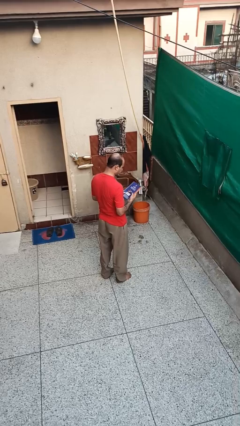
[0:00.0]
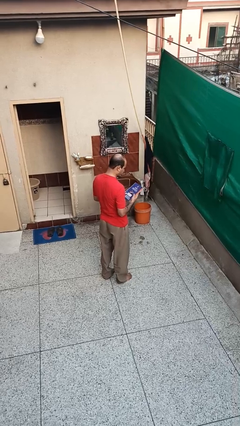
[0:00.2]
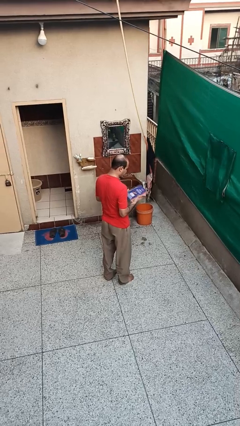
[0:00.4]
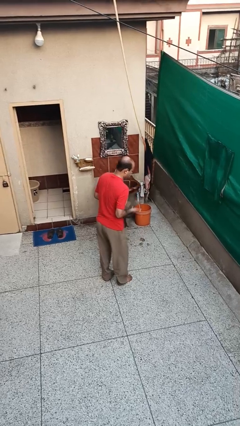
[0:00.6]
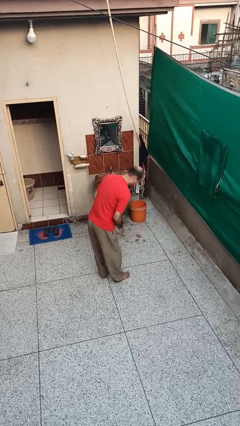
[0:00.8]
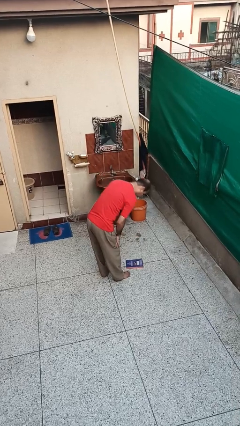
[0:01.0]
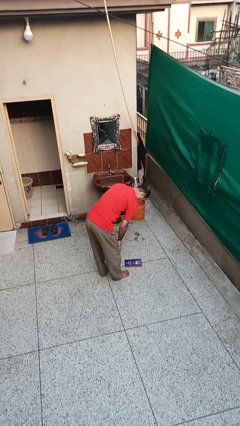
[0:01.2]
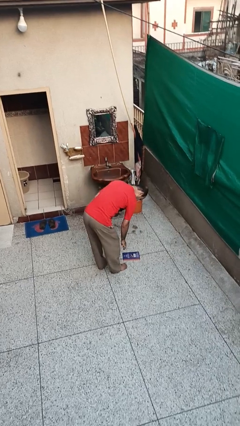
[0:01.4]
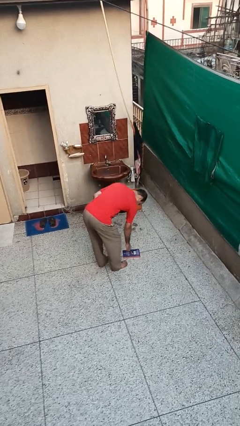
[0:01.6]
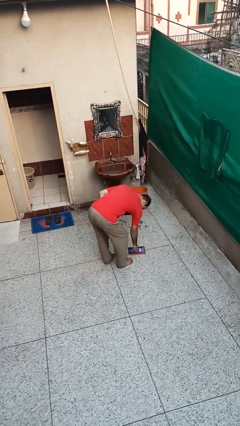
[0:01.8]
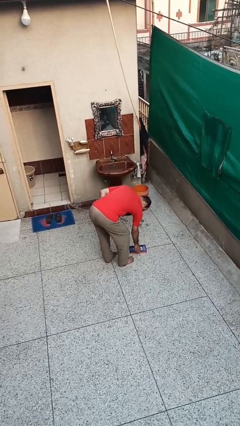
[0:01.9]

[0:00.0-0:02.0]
person drops object

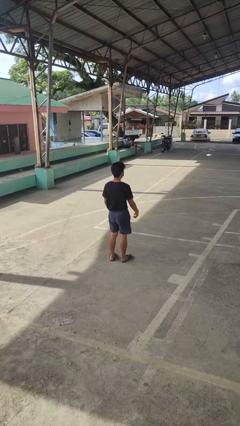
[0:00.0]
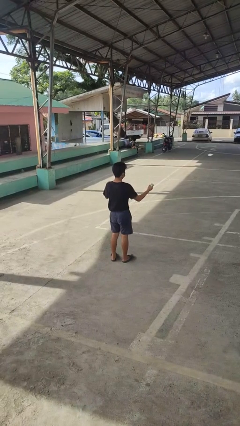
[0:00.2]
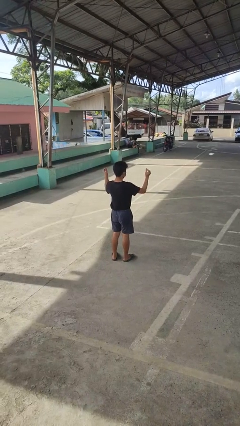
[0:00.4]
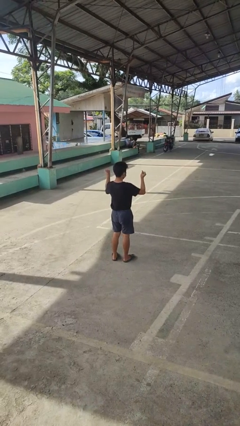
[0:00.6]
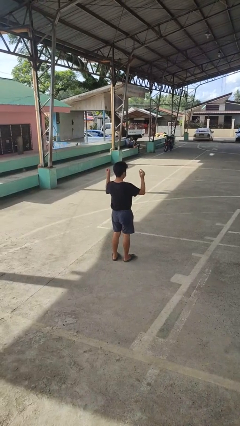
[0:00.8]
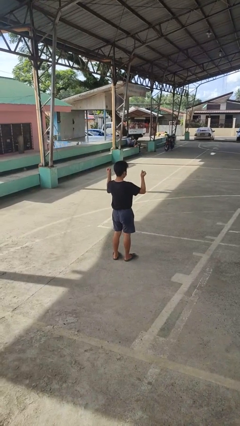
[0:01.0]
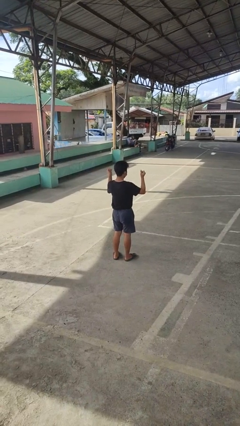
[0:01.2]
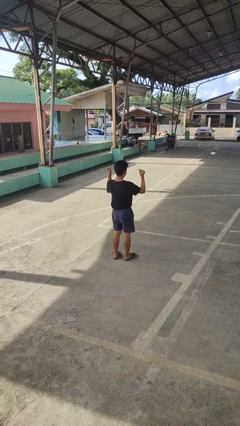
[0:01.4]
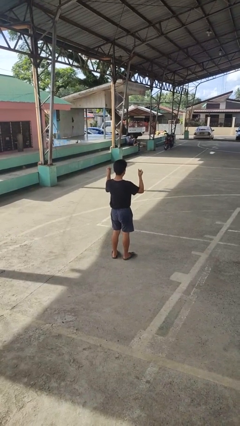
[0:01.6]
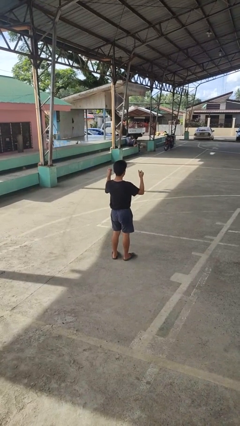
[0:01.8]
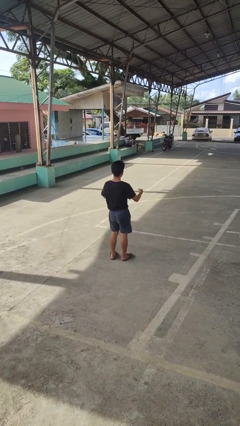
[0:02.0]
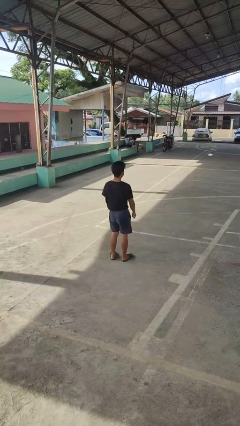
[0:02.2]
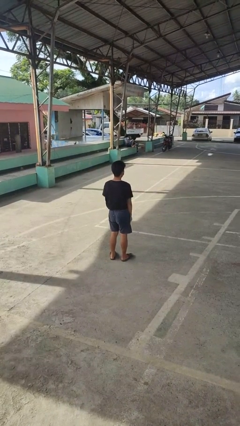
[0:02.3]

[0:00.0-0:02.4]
person snaps fingers

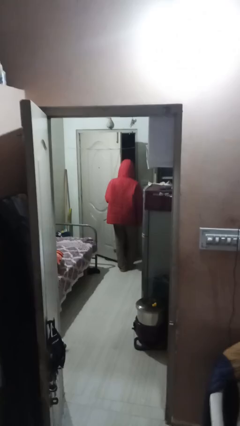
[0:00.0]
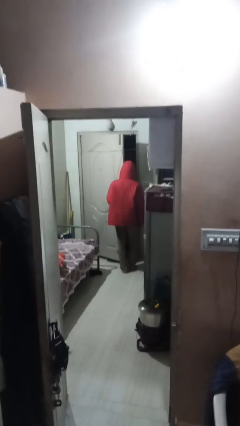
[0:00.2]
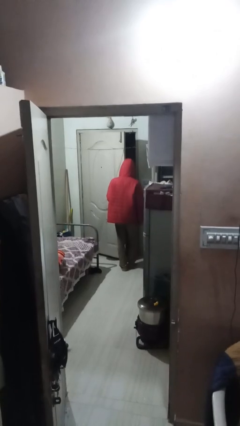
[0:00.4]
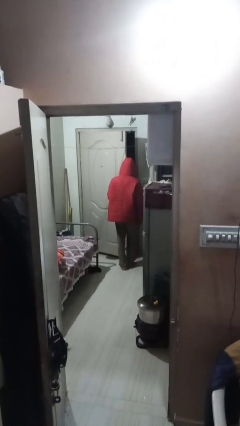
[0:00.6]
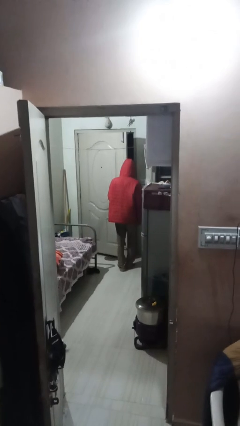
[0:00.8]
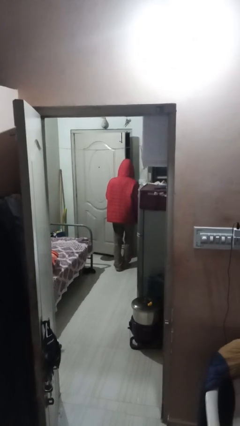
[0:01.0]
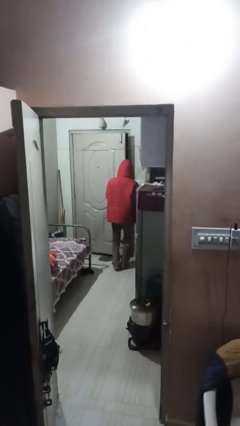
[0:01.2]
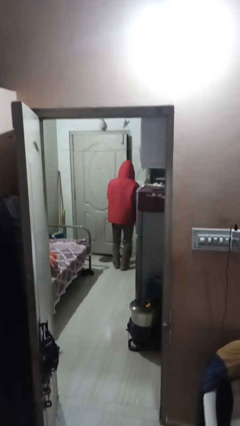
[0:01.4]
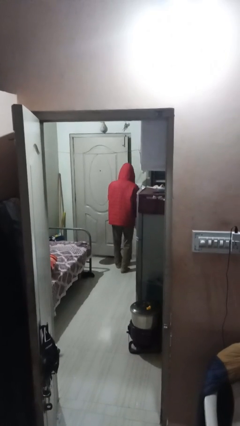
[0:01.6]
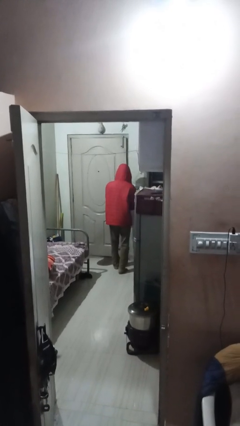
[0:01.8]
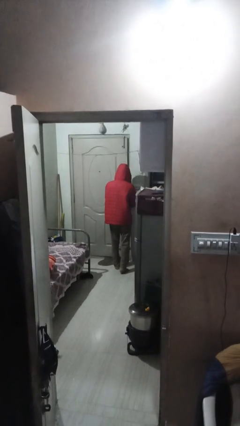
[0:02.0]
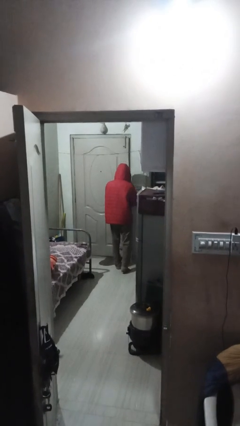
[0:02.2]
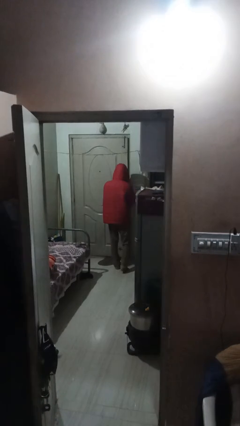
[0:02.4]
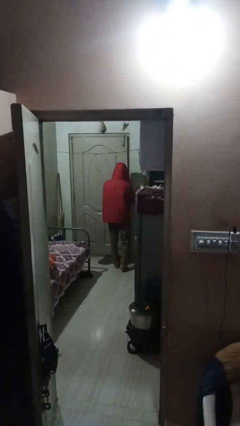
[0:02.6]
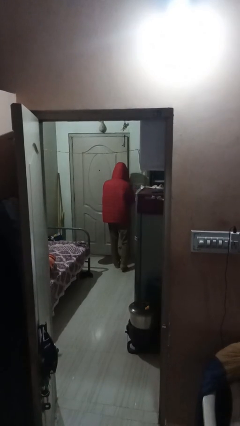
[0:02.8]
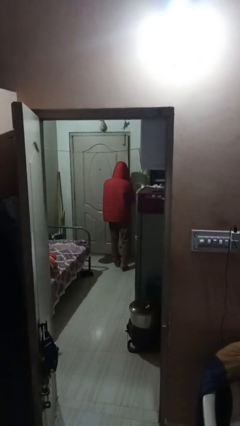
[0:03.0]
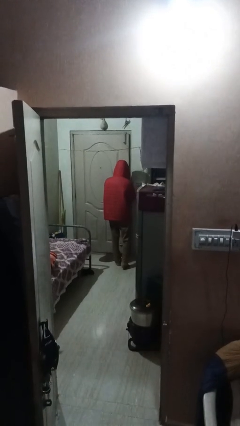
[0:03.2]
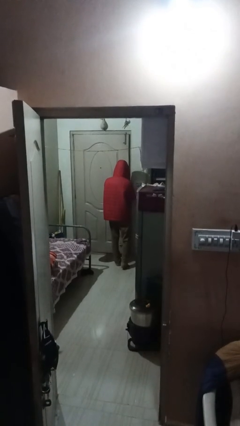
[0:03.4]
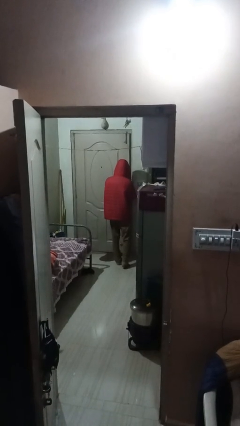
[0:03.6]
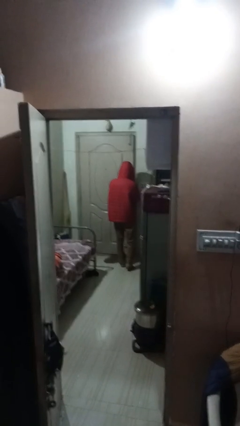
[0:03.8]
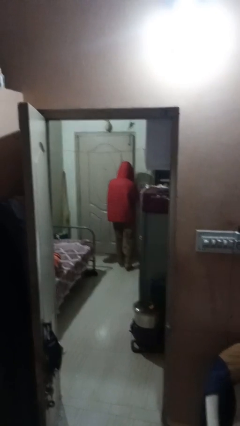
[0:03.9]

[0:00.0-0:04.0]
person closes facility door

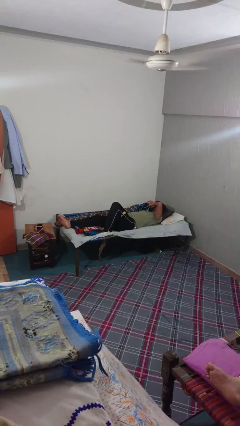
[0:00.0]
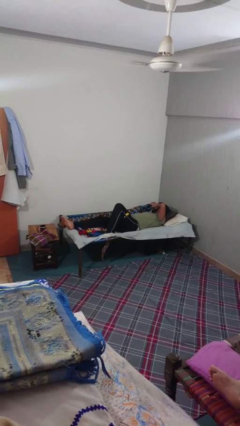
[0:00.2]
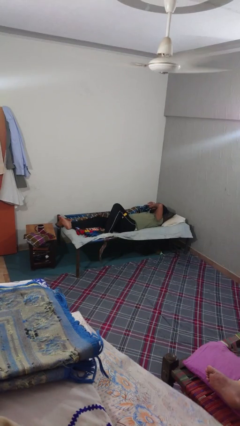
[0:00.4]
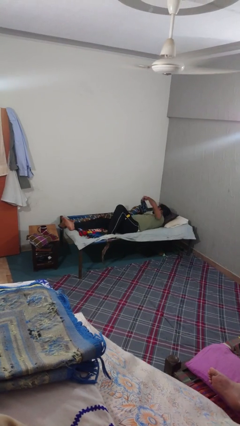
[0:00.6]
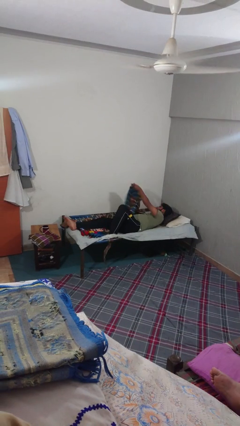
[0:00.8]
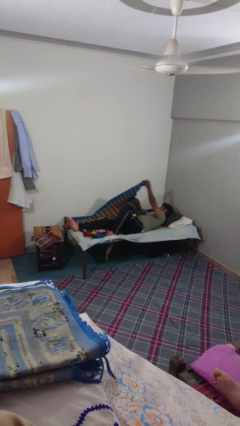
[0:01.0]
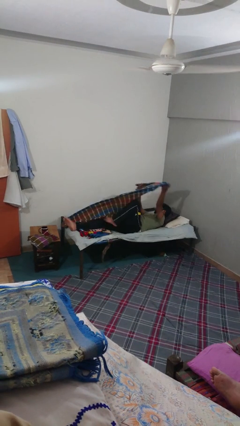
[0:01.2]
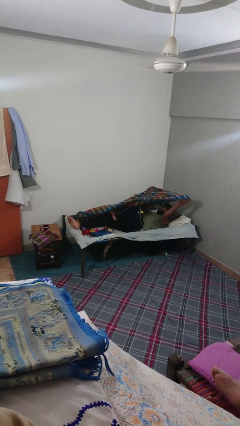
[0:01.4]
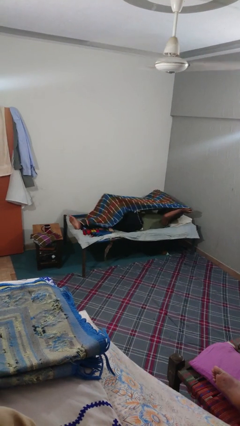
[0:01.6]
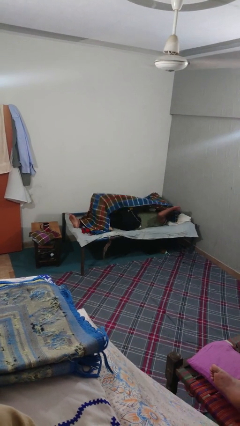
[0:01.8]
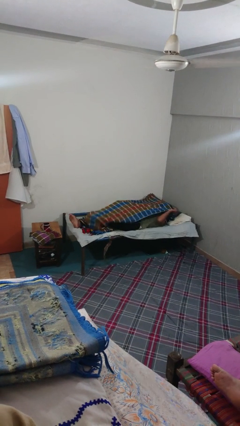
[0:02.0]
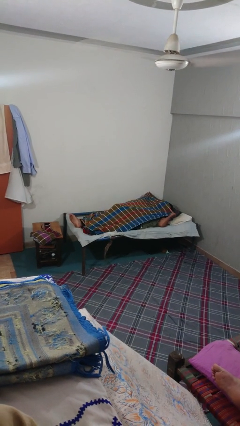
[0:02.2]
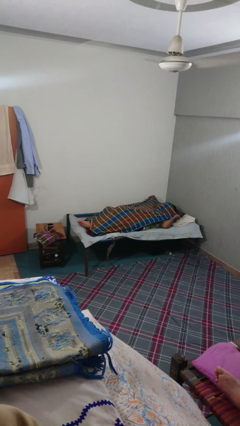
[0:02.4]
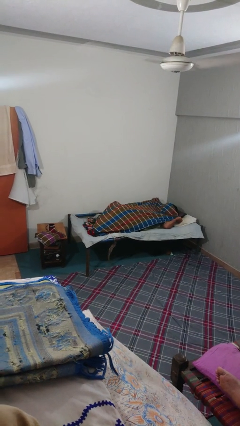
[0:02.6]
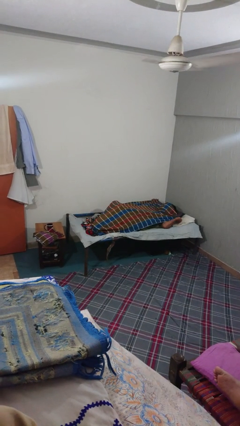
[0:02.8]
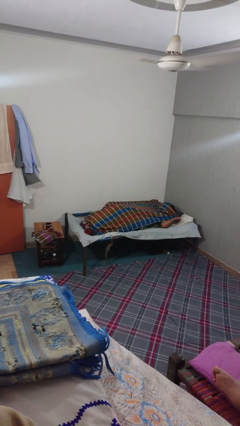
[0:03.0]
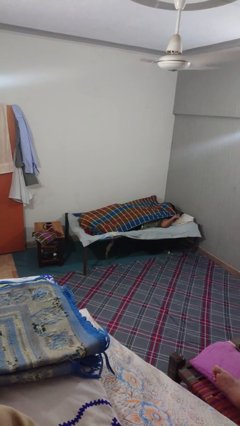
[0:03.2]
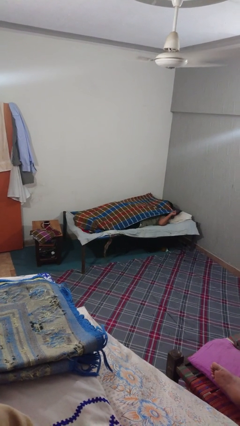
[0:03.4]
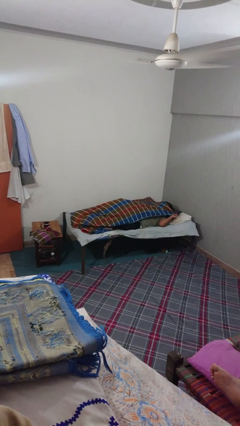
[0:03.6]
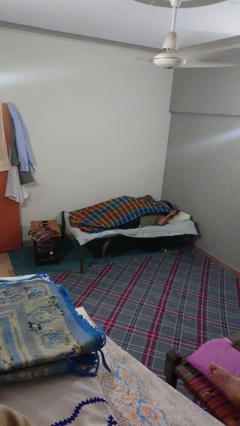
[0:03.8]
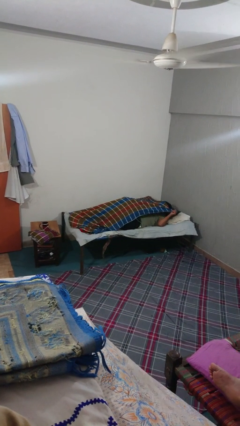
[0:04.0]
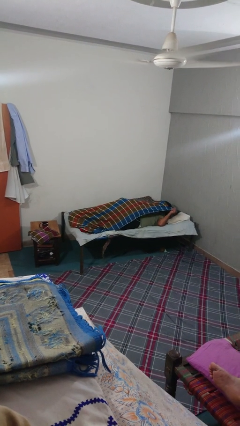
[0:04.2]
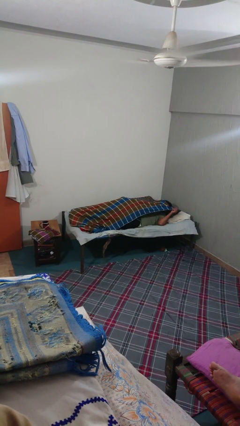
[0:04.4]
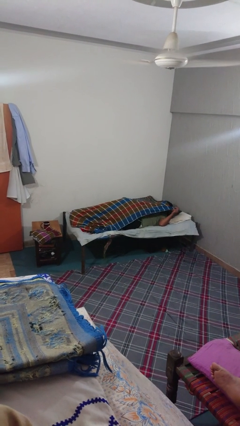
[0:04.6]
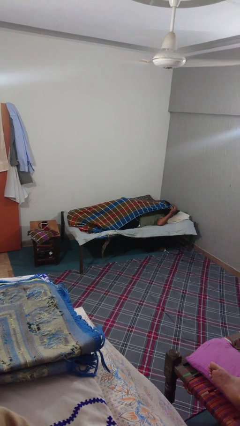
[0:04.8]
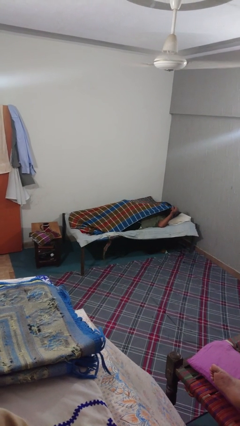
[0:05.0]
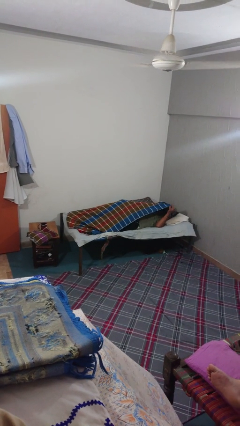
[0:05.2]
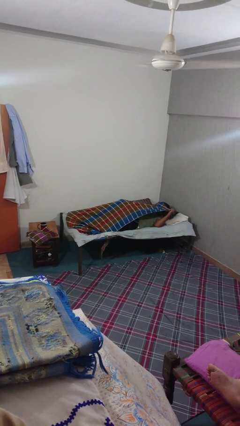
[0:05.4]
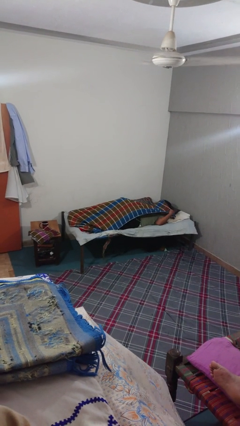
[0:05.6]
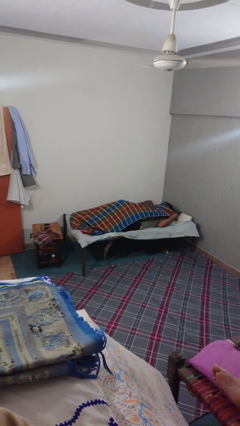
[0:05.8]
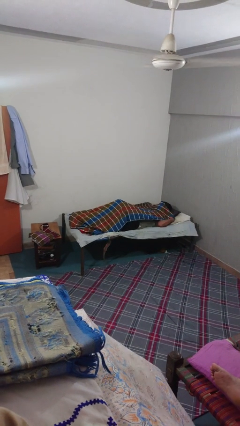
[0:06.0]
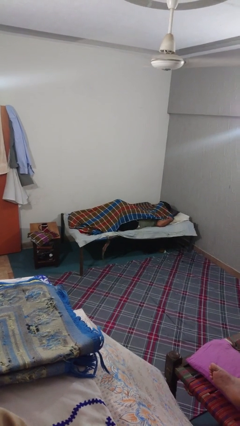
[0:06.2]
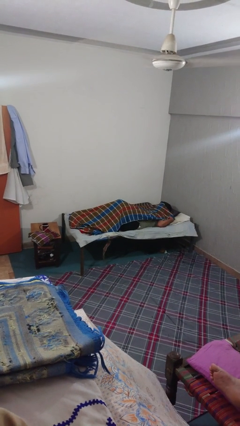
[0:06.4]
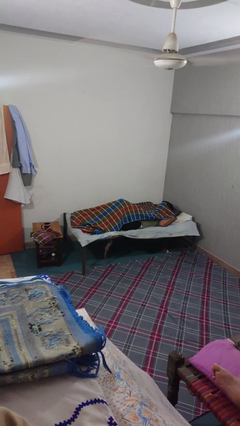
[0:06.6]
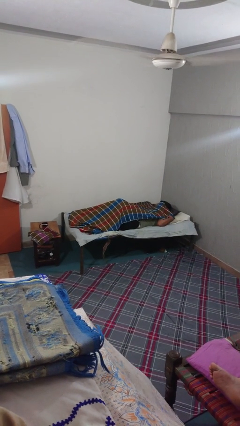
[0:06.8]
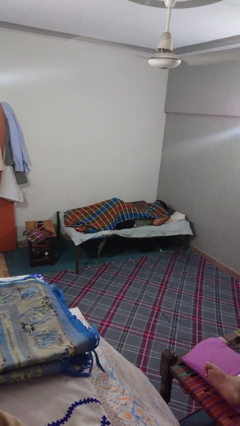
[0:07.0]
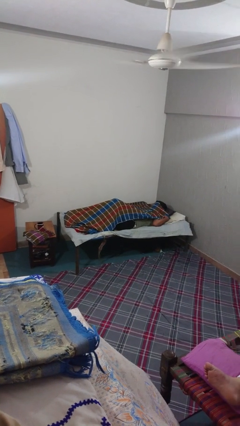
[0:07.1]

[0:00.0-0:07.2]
person covers with bedsheets

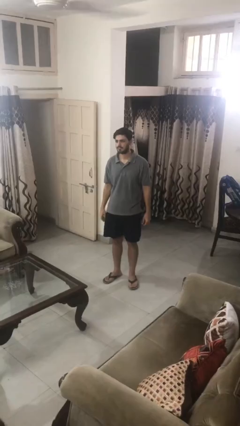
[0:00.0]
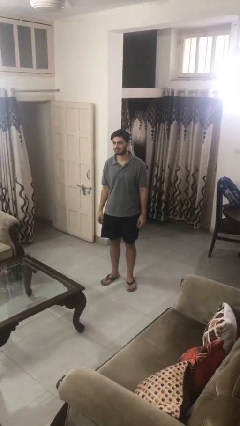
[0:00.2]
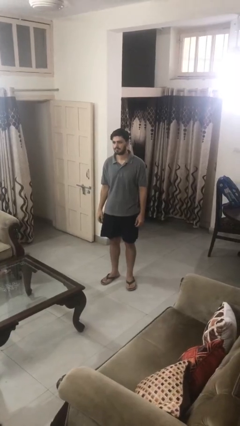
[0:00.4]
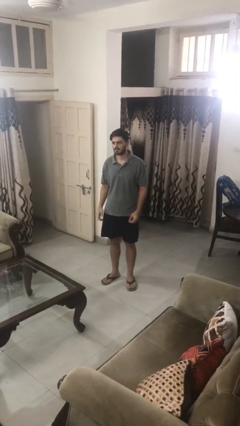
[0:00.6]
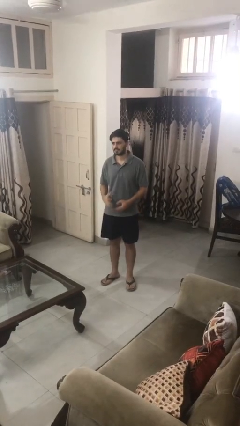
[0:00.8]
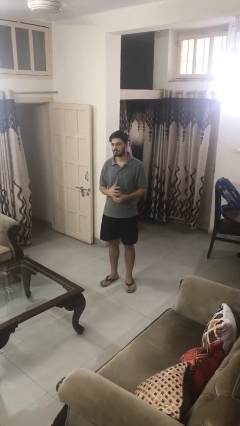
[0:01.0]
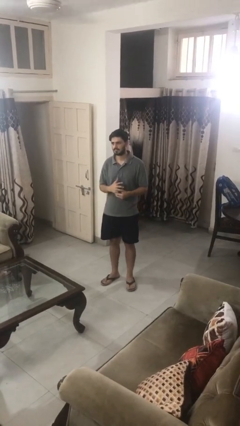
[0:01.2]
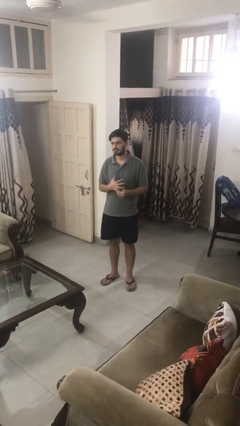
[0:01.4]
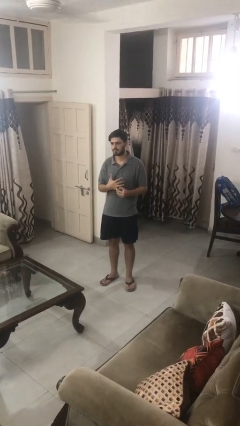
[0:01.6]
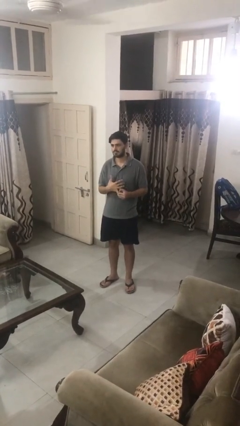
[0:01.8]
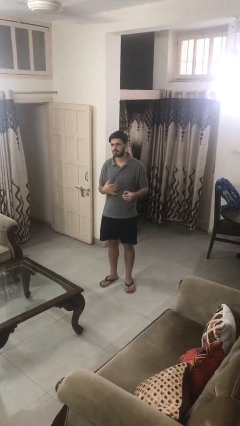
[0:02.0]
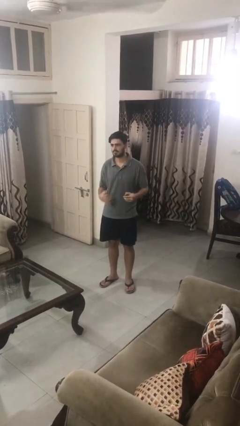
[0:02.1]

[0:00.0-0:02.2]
person takes off ring
